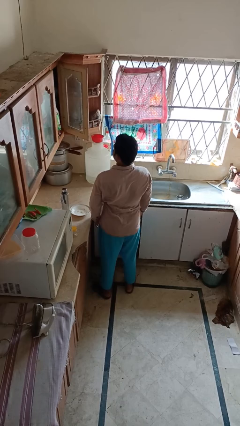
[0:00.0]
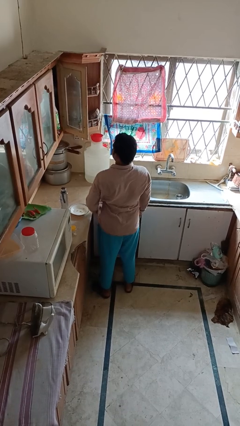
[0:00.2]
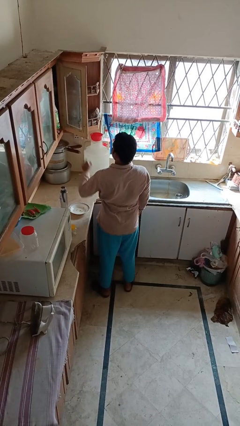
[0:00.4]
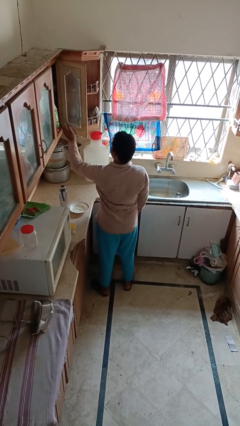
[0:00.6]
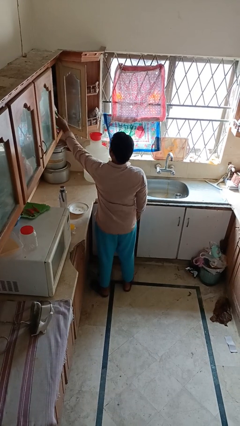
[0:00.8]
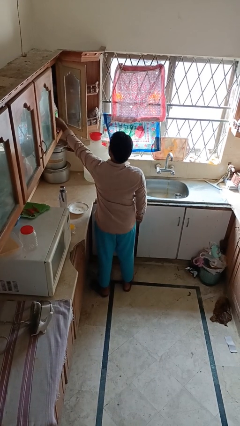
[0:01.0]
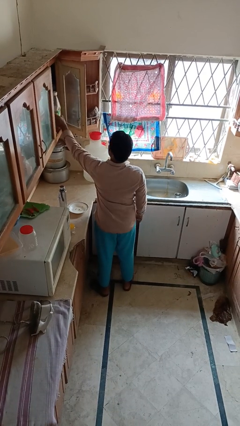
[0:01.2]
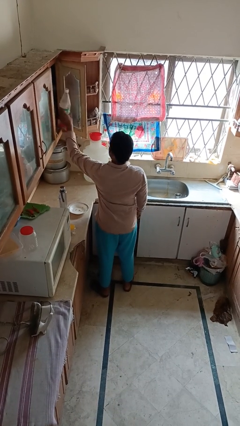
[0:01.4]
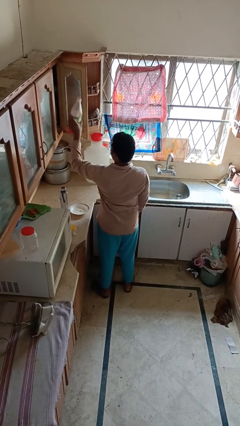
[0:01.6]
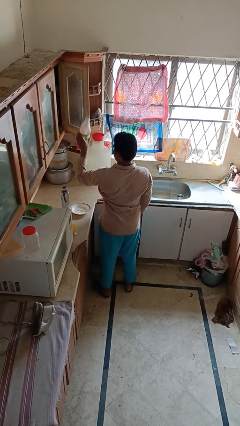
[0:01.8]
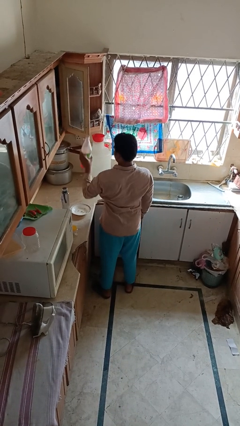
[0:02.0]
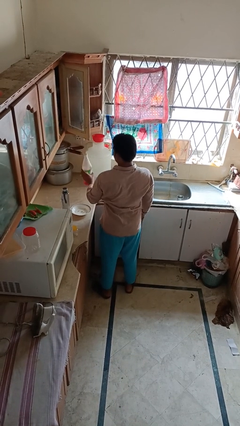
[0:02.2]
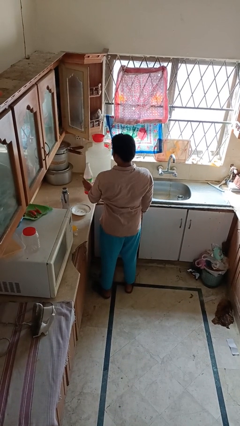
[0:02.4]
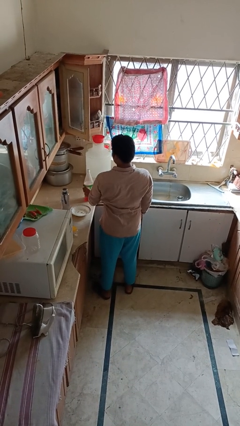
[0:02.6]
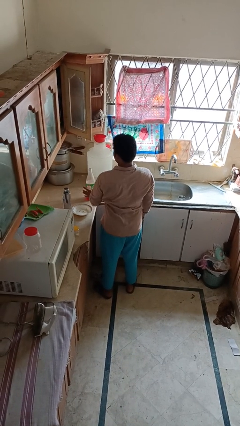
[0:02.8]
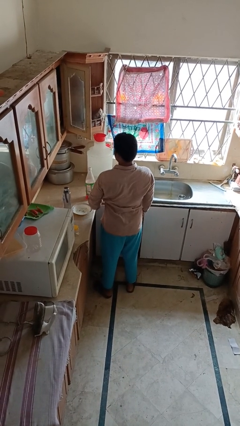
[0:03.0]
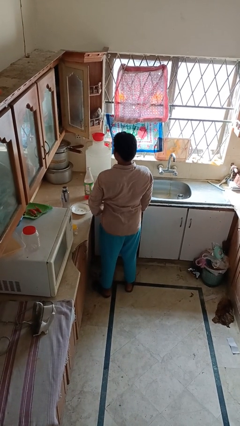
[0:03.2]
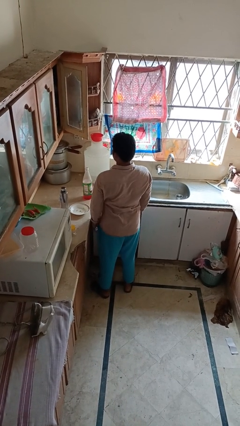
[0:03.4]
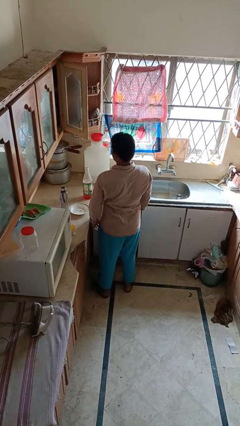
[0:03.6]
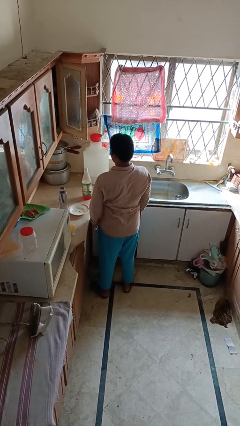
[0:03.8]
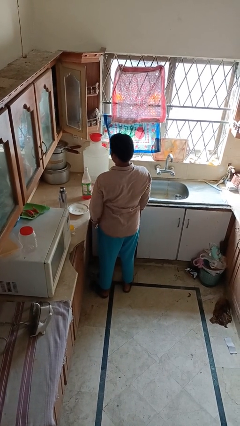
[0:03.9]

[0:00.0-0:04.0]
person takes object from cabinet

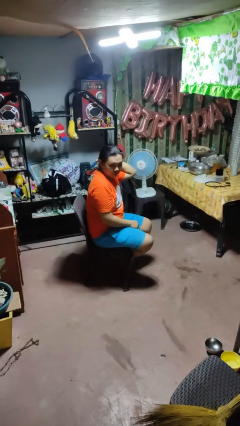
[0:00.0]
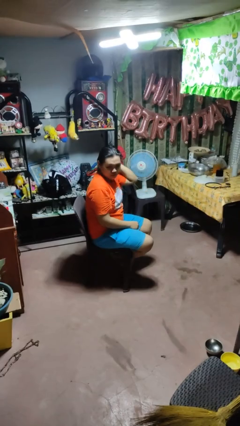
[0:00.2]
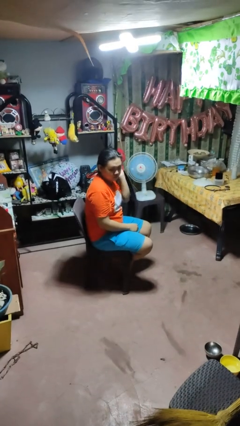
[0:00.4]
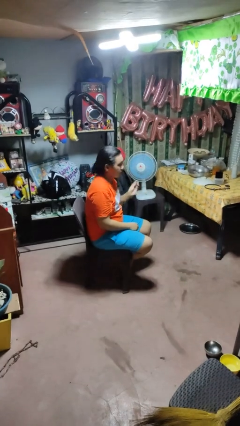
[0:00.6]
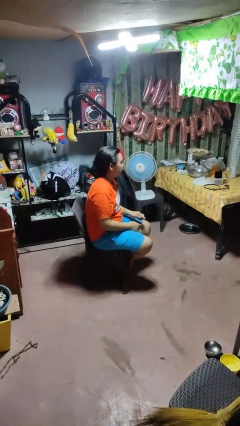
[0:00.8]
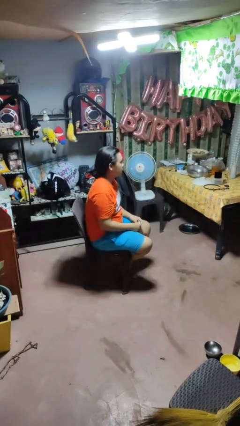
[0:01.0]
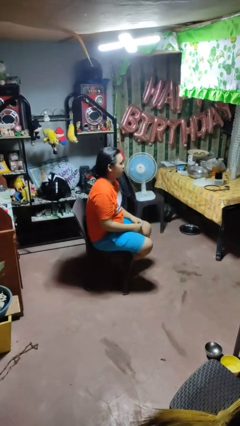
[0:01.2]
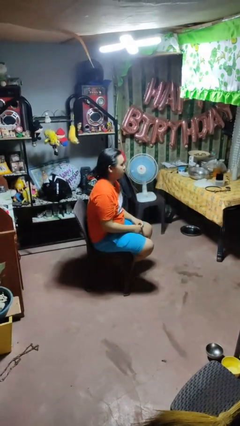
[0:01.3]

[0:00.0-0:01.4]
person takes off hairtie

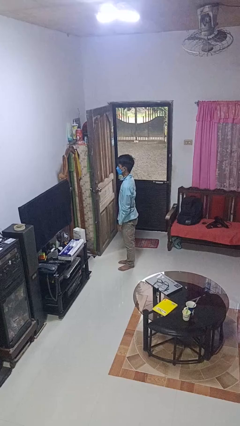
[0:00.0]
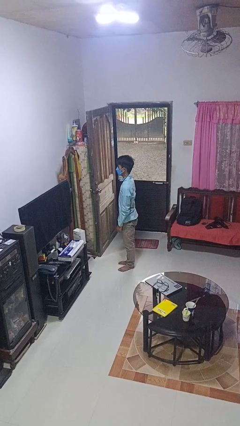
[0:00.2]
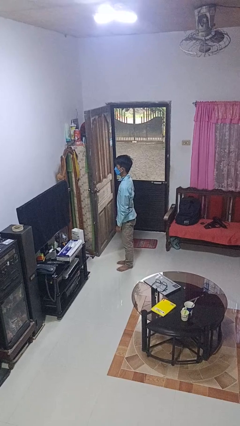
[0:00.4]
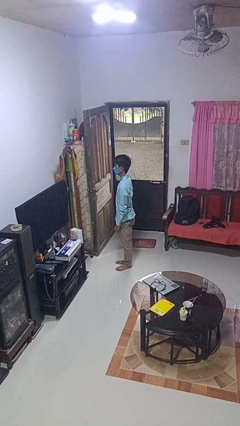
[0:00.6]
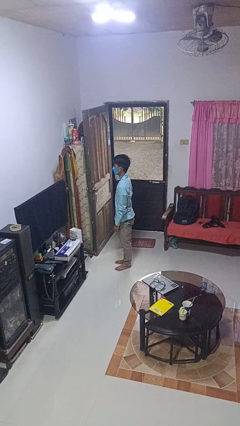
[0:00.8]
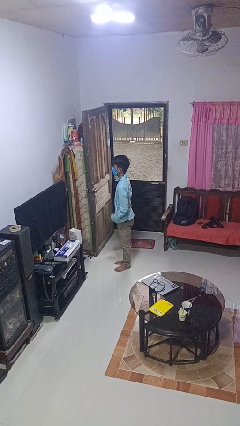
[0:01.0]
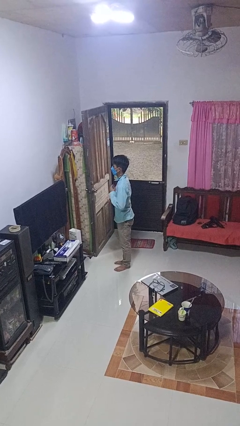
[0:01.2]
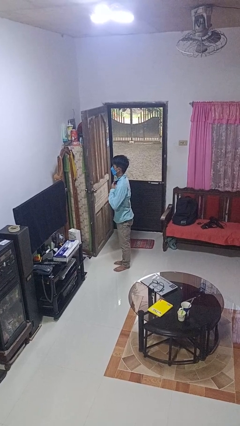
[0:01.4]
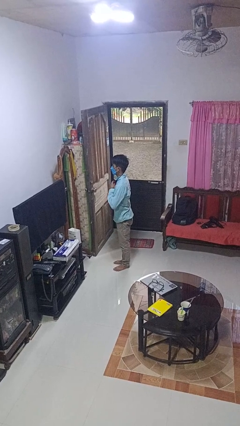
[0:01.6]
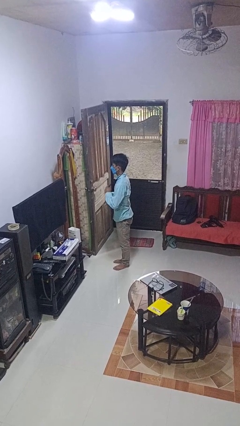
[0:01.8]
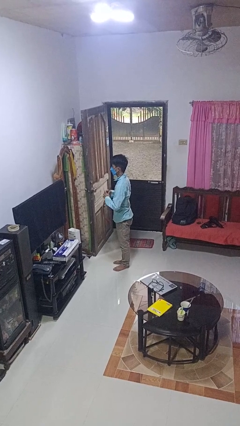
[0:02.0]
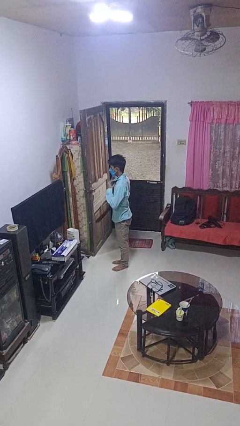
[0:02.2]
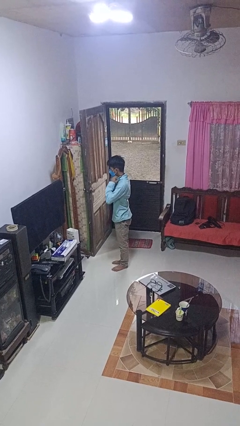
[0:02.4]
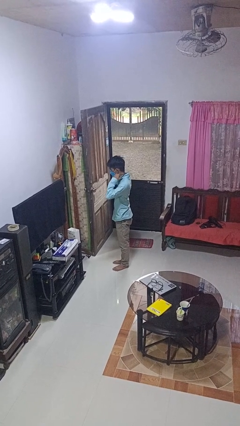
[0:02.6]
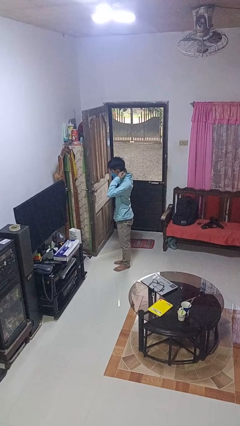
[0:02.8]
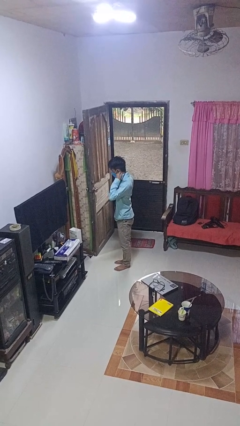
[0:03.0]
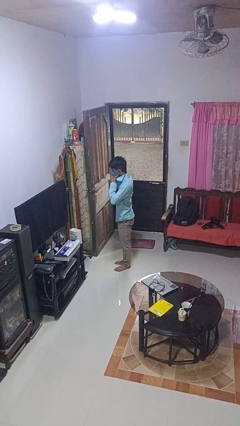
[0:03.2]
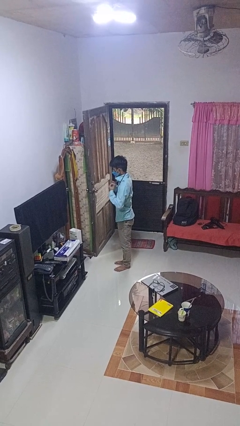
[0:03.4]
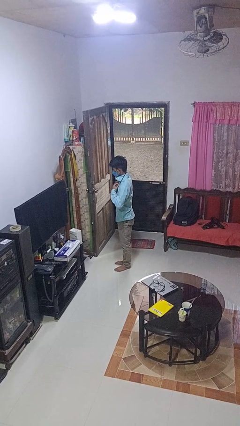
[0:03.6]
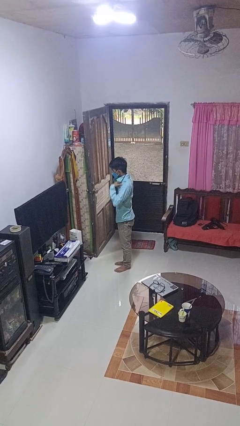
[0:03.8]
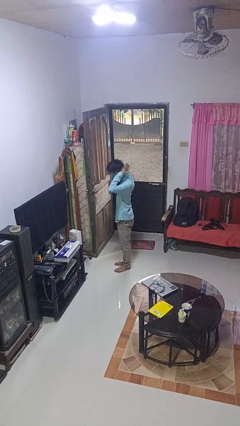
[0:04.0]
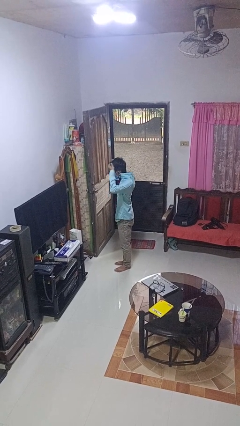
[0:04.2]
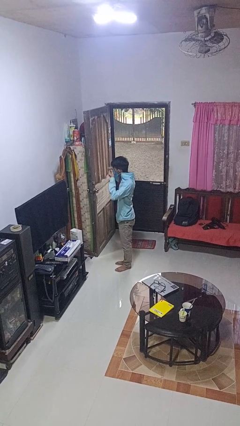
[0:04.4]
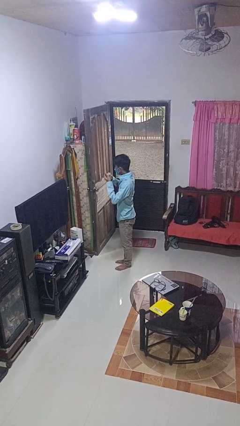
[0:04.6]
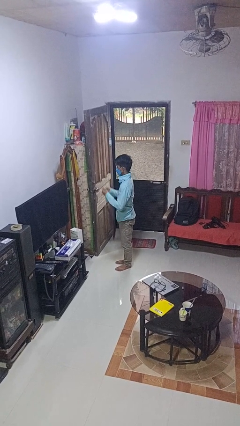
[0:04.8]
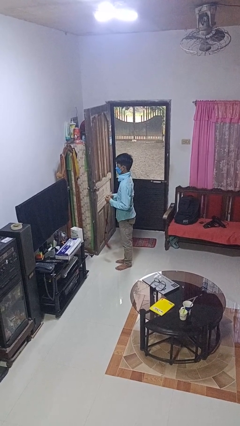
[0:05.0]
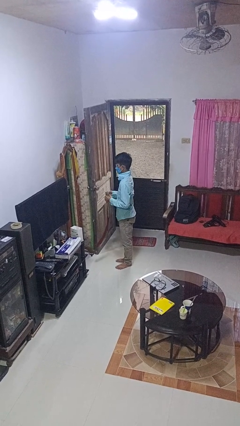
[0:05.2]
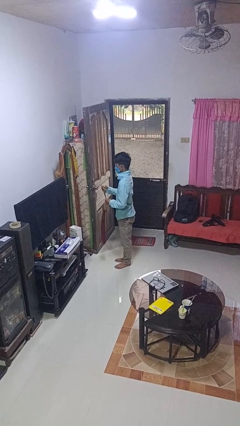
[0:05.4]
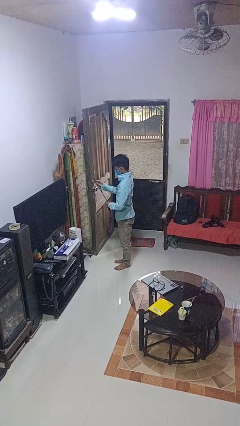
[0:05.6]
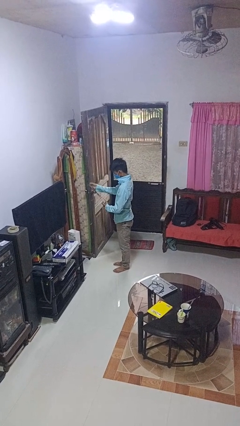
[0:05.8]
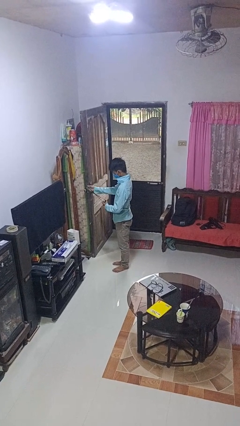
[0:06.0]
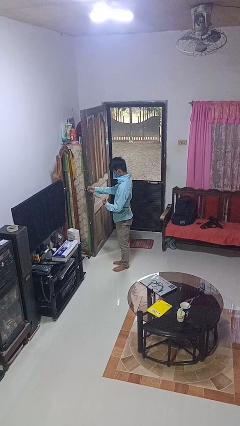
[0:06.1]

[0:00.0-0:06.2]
person takes off necktie

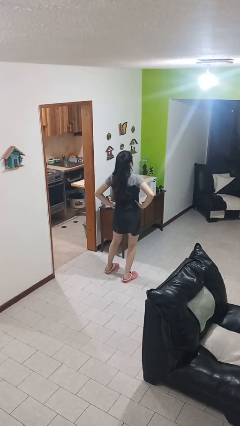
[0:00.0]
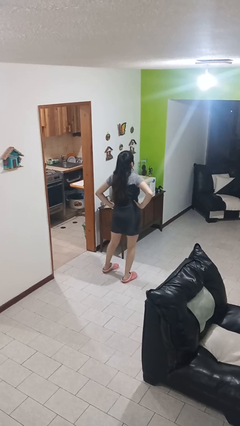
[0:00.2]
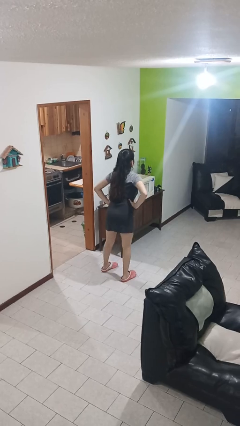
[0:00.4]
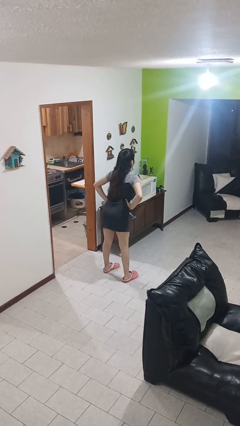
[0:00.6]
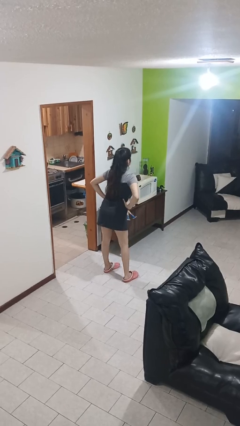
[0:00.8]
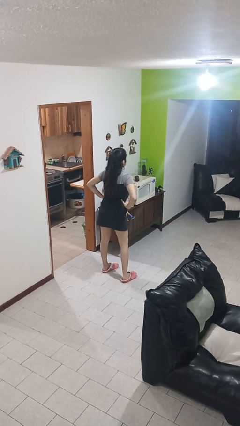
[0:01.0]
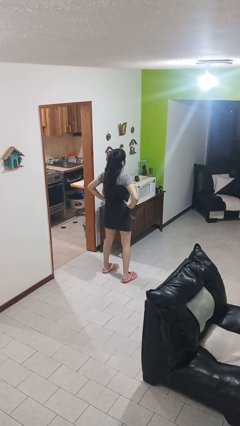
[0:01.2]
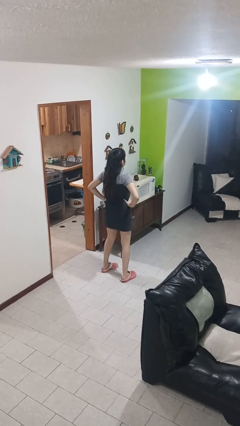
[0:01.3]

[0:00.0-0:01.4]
person wiggles hips

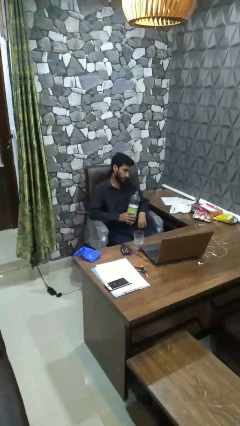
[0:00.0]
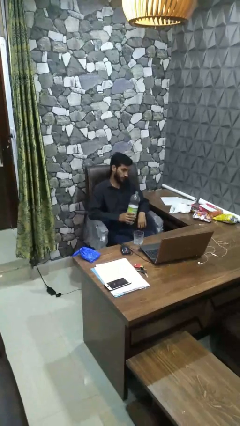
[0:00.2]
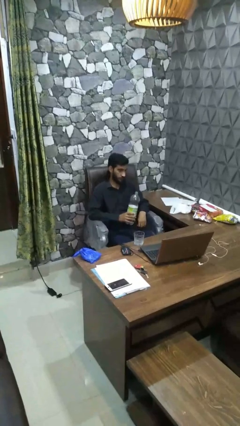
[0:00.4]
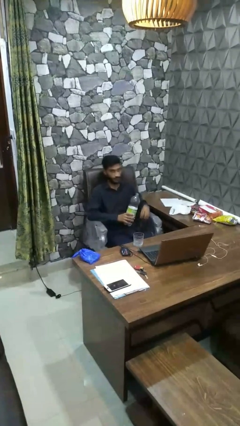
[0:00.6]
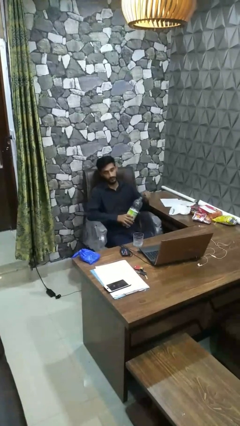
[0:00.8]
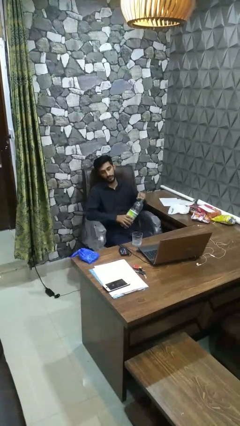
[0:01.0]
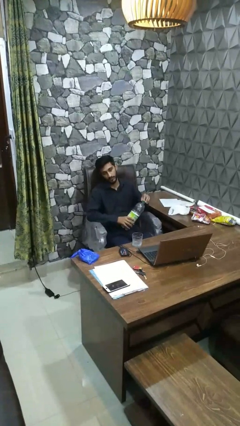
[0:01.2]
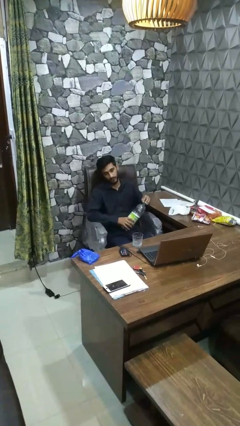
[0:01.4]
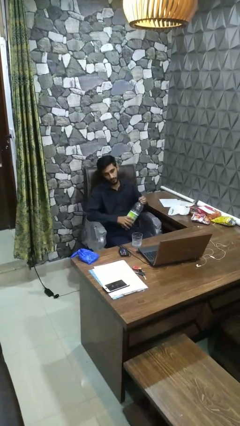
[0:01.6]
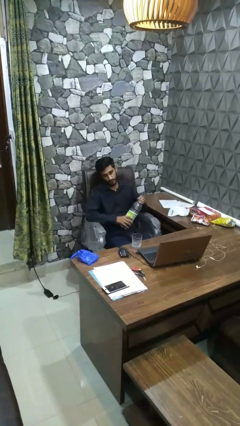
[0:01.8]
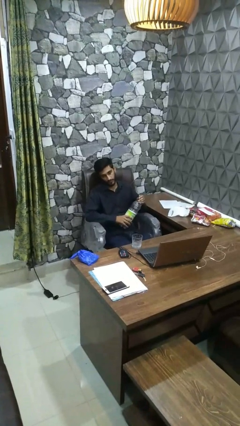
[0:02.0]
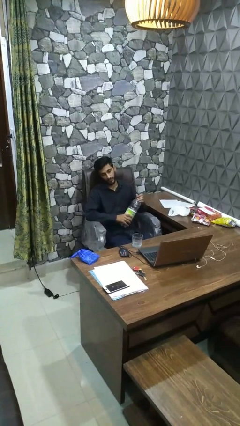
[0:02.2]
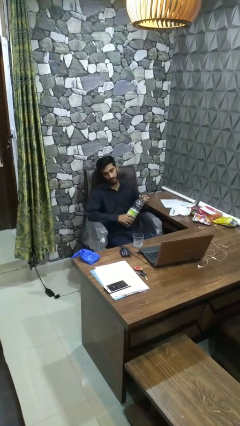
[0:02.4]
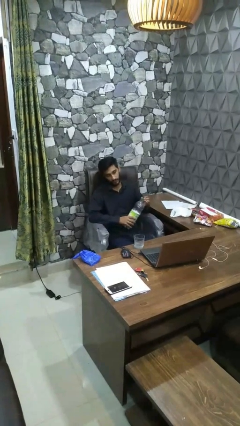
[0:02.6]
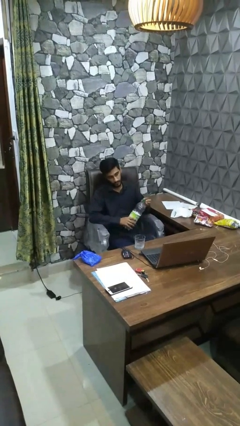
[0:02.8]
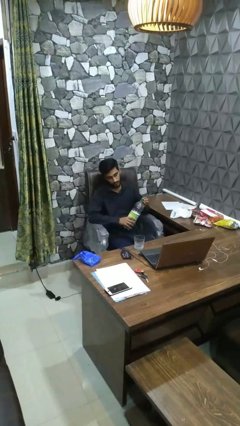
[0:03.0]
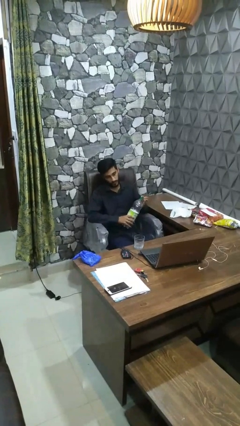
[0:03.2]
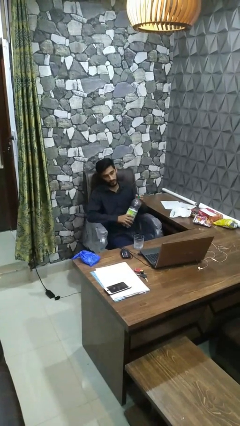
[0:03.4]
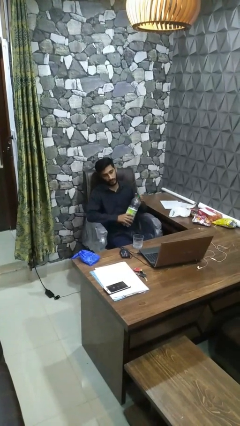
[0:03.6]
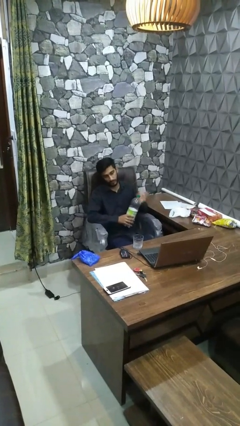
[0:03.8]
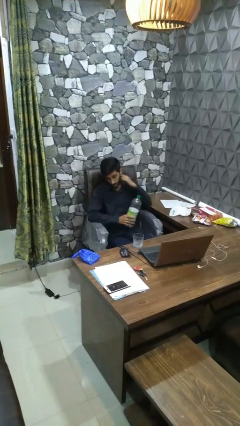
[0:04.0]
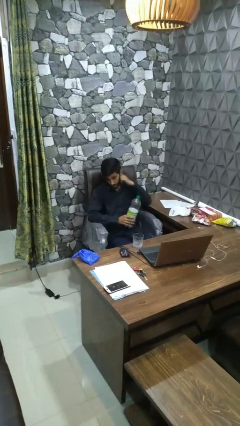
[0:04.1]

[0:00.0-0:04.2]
person screws lid to bottle

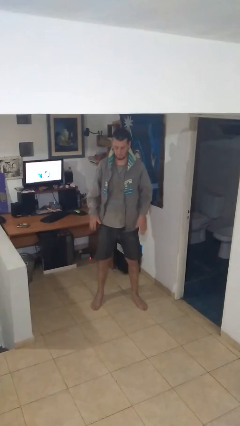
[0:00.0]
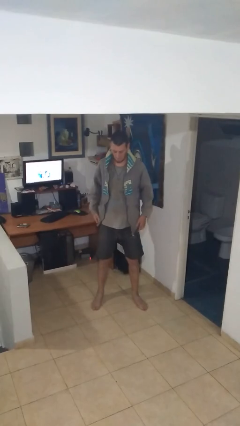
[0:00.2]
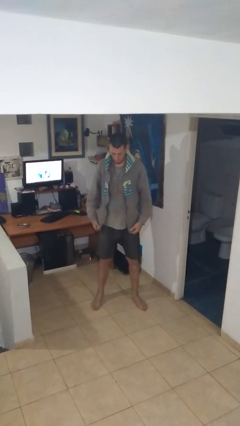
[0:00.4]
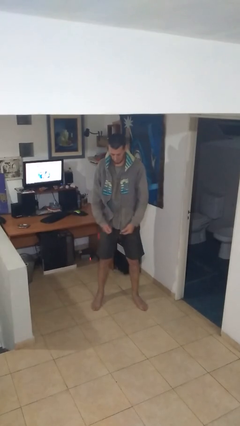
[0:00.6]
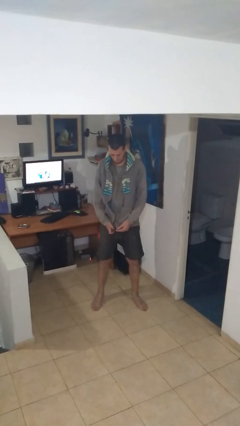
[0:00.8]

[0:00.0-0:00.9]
person puts on jacket
